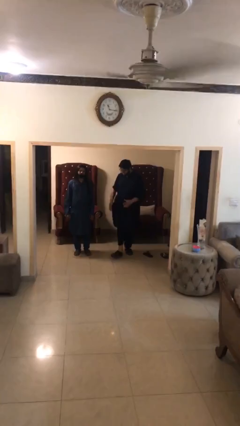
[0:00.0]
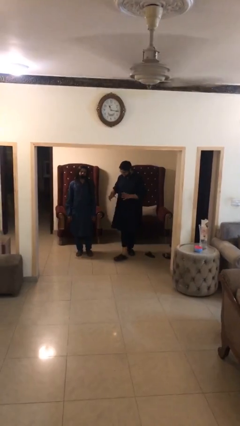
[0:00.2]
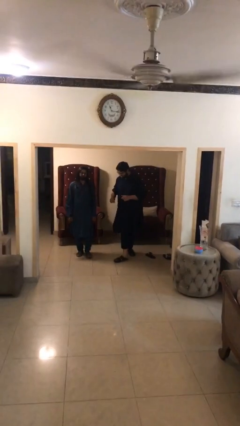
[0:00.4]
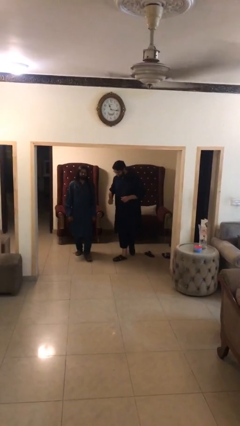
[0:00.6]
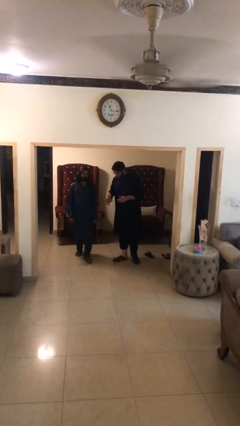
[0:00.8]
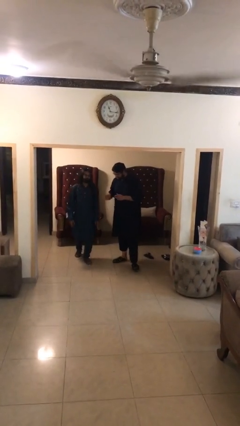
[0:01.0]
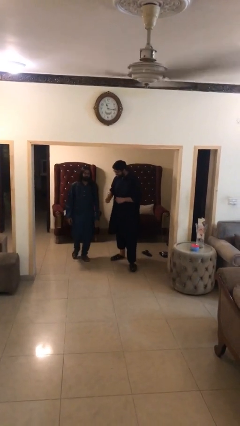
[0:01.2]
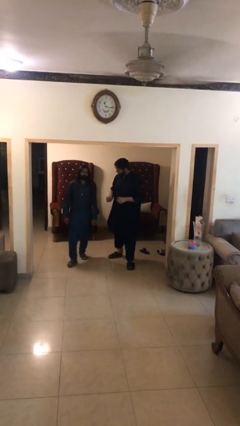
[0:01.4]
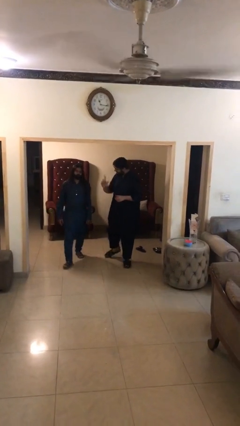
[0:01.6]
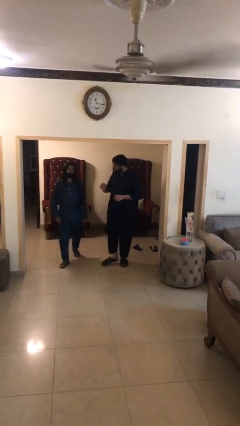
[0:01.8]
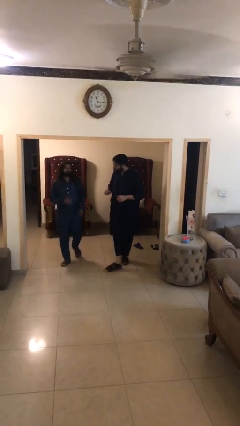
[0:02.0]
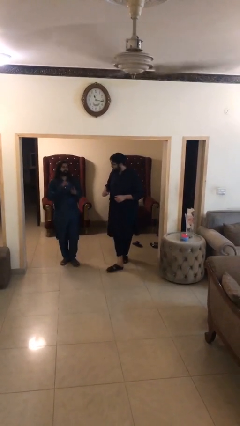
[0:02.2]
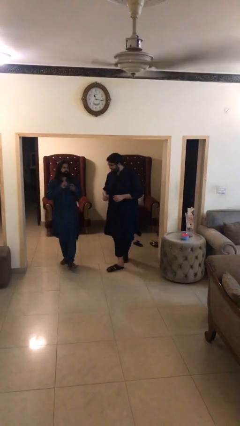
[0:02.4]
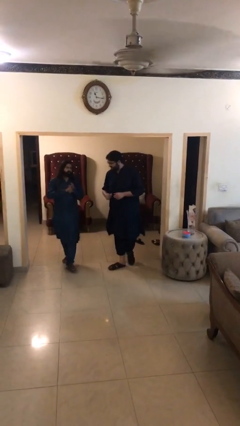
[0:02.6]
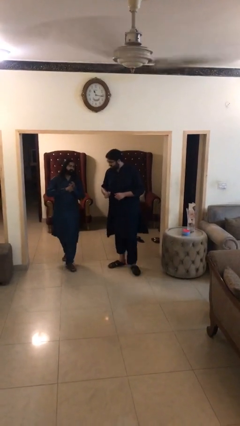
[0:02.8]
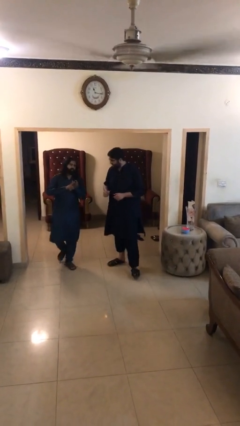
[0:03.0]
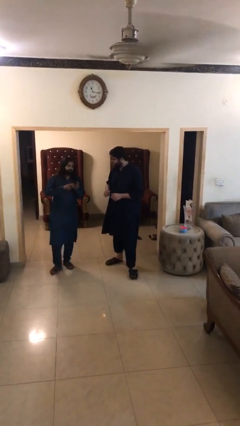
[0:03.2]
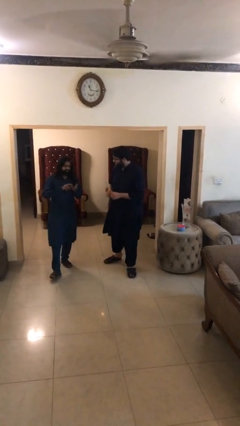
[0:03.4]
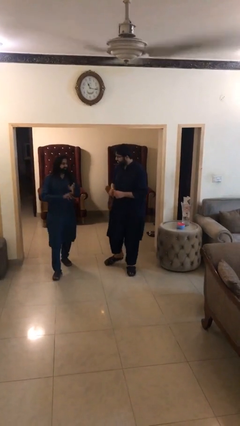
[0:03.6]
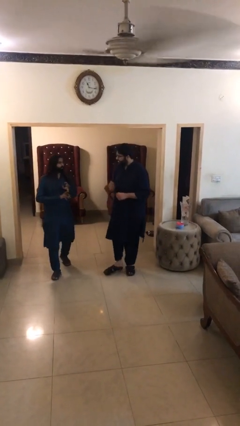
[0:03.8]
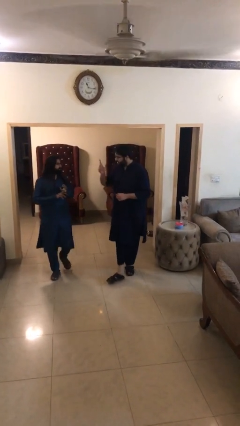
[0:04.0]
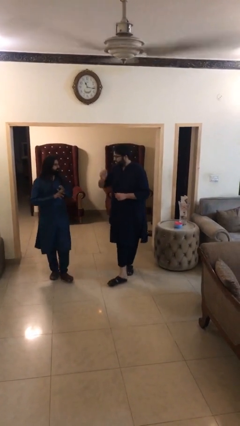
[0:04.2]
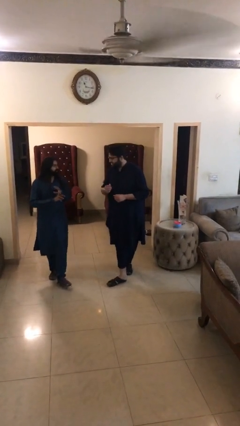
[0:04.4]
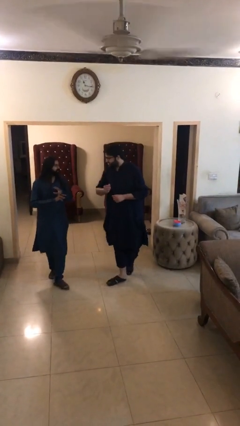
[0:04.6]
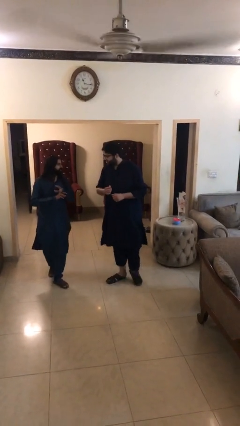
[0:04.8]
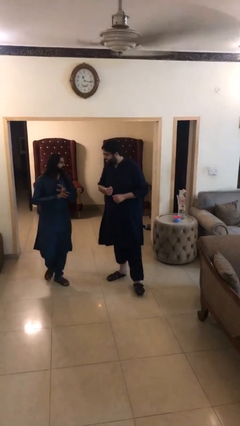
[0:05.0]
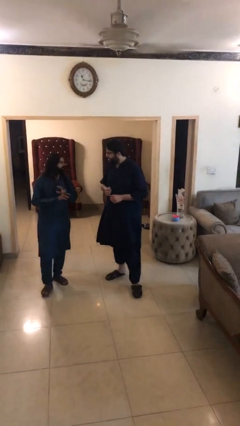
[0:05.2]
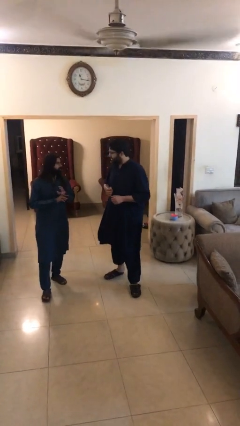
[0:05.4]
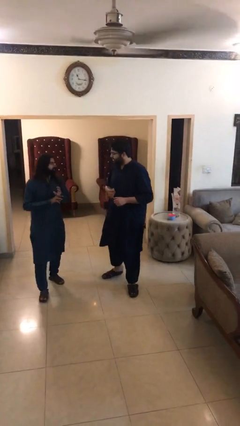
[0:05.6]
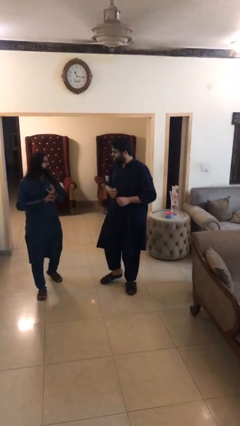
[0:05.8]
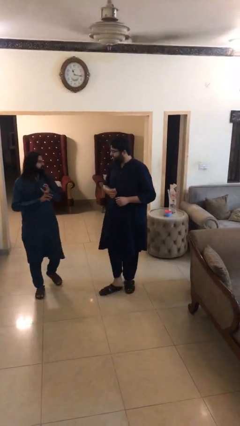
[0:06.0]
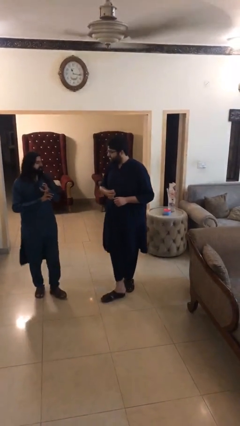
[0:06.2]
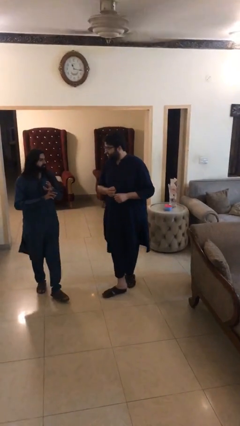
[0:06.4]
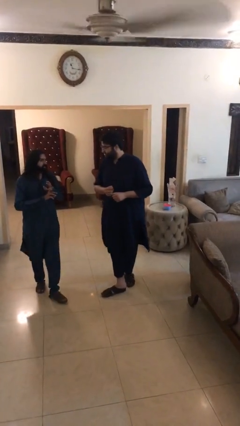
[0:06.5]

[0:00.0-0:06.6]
person talks to person

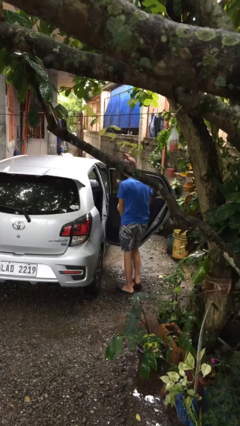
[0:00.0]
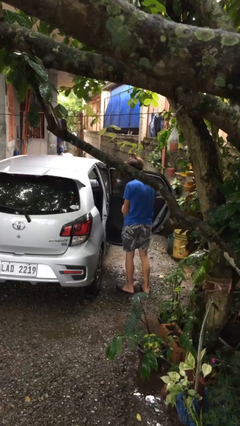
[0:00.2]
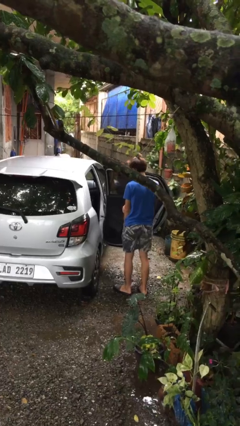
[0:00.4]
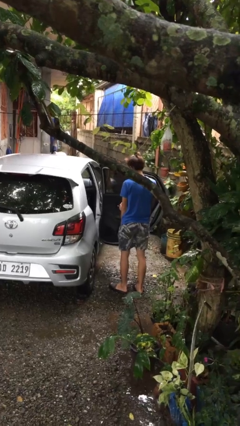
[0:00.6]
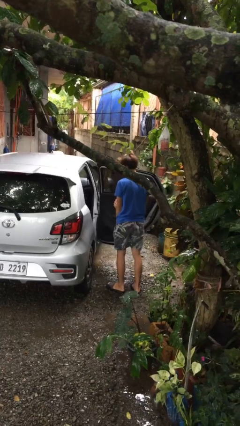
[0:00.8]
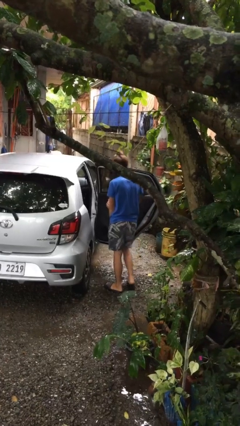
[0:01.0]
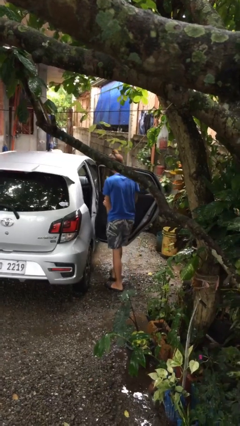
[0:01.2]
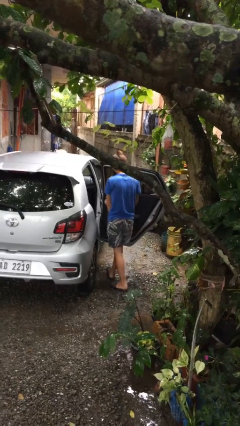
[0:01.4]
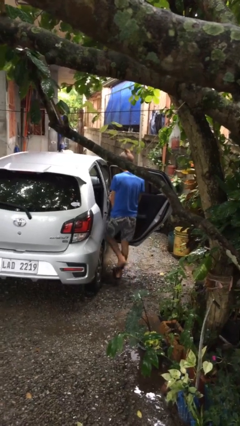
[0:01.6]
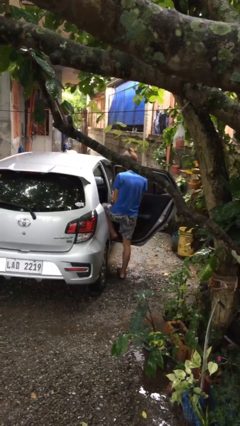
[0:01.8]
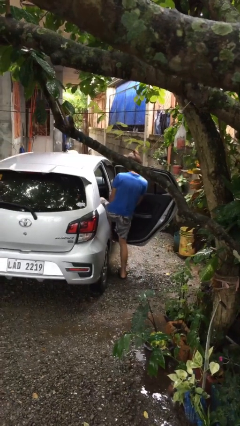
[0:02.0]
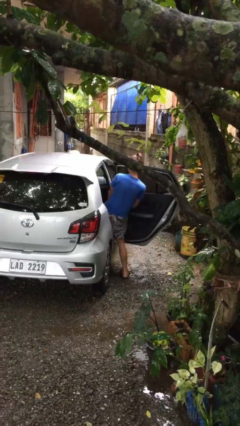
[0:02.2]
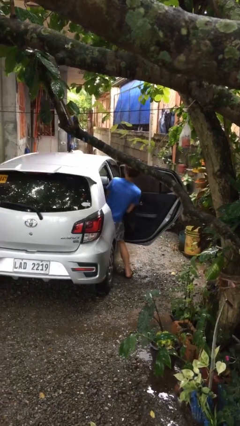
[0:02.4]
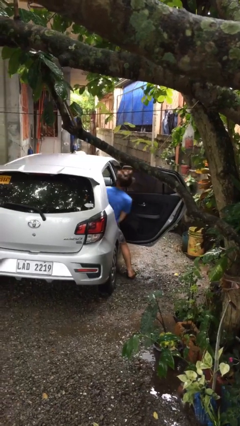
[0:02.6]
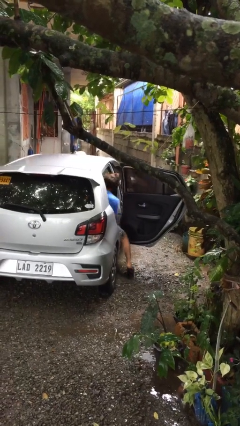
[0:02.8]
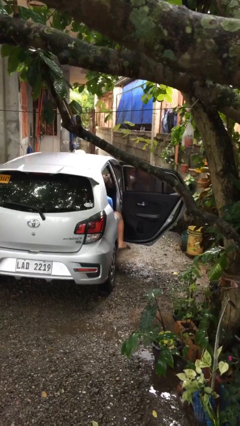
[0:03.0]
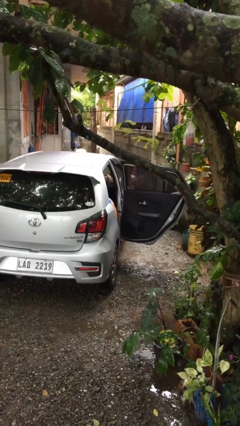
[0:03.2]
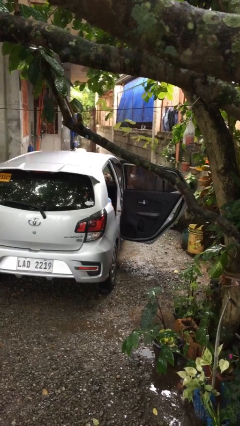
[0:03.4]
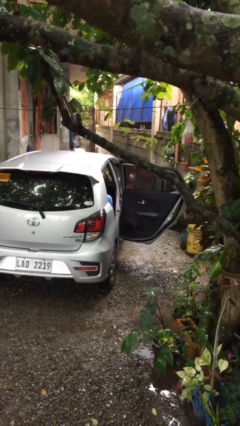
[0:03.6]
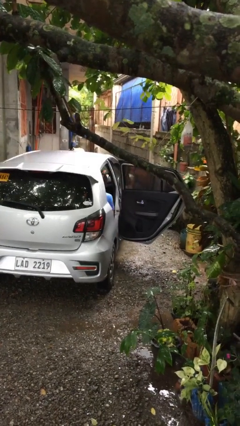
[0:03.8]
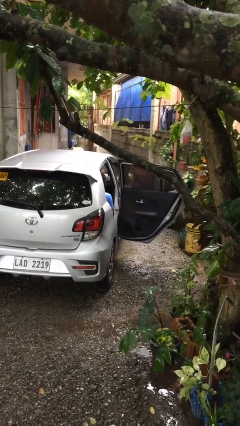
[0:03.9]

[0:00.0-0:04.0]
person enters car

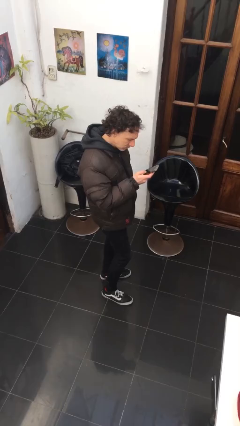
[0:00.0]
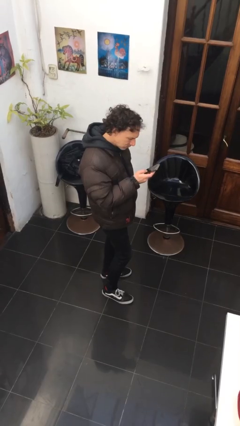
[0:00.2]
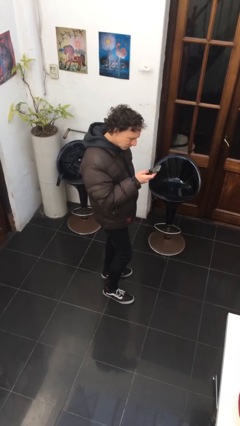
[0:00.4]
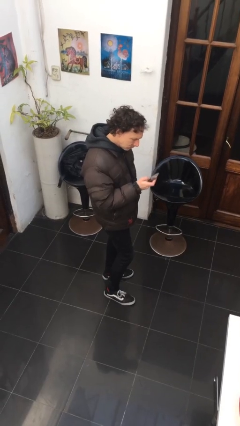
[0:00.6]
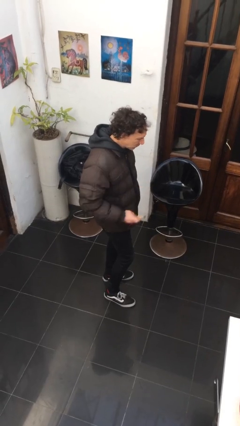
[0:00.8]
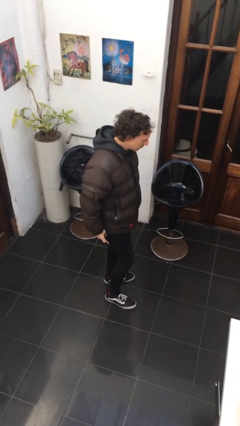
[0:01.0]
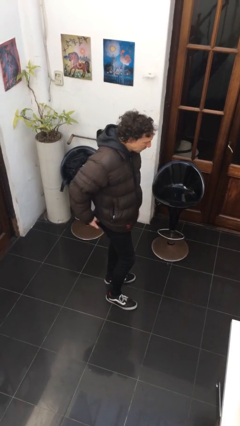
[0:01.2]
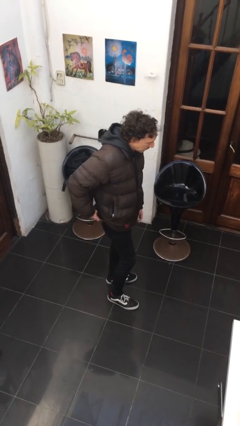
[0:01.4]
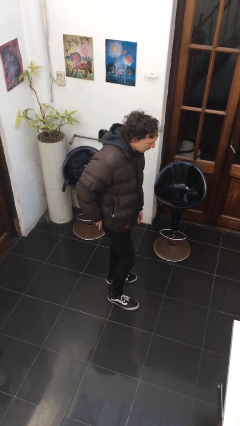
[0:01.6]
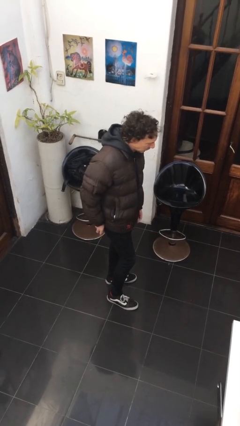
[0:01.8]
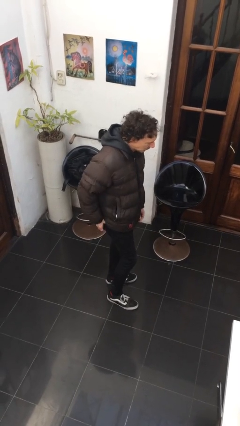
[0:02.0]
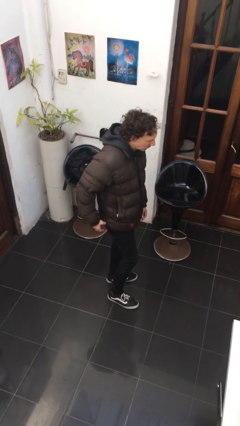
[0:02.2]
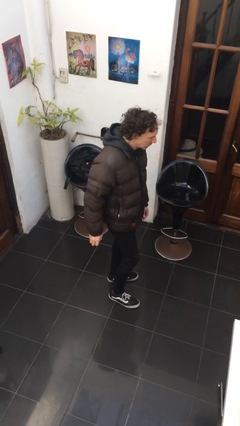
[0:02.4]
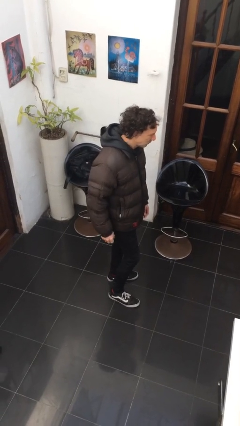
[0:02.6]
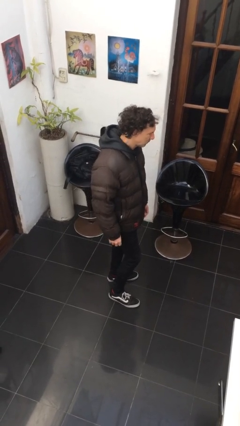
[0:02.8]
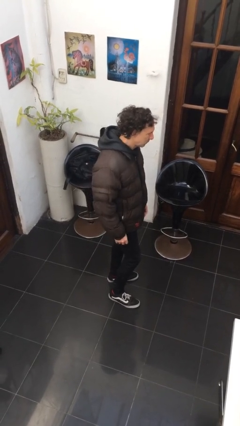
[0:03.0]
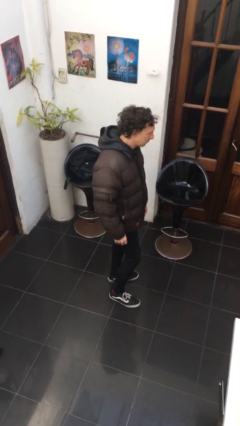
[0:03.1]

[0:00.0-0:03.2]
person puts phone into pocket

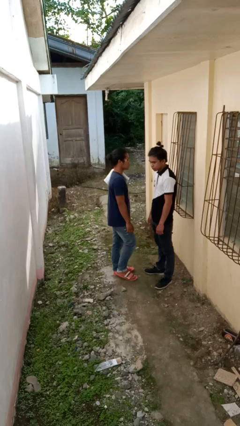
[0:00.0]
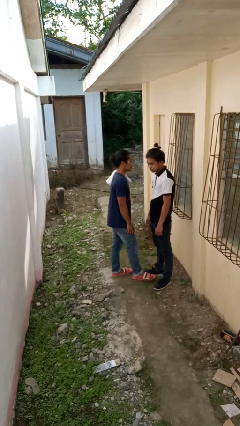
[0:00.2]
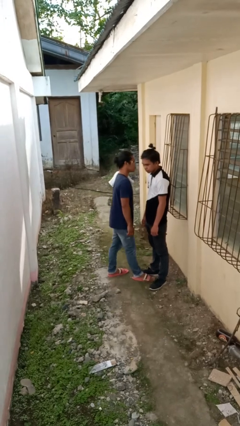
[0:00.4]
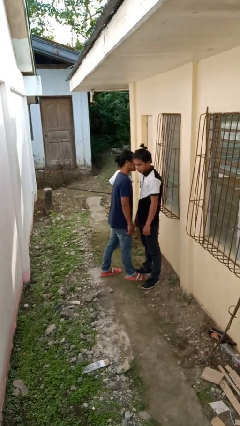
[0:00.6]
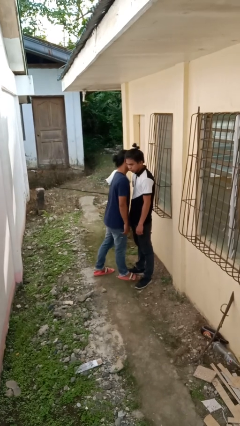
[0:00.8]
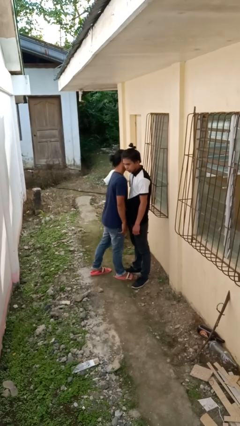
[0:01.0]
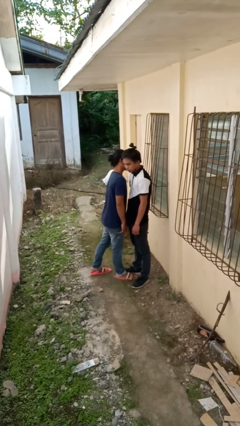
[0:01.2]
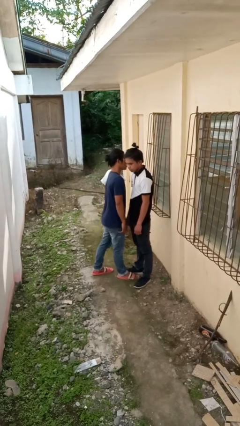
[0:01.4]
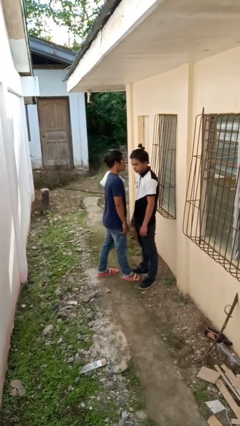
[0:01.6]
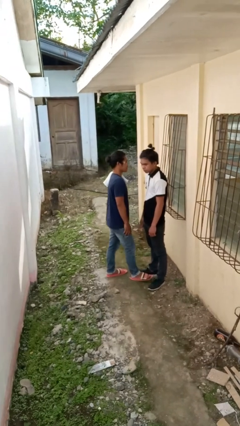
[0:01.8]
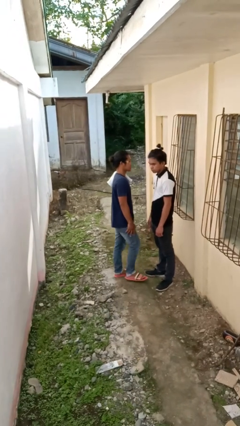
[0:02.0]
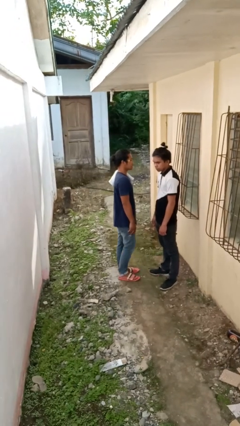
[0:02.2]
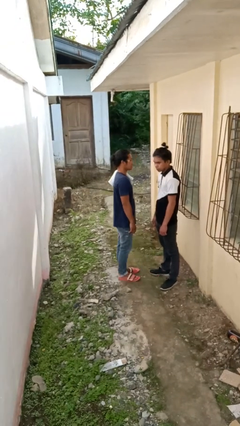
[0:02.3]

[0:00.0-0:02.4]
person kisses cheek of person

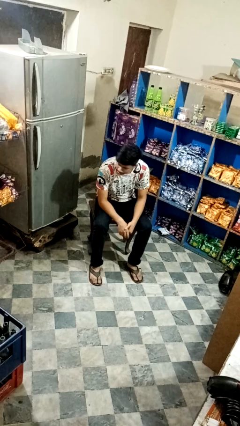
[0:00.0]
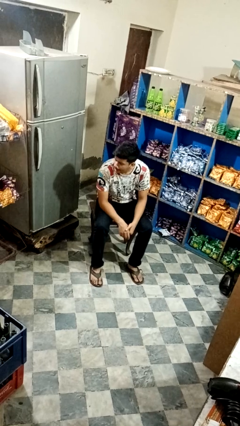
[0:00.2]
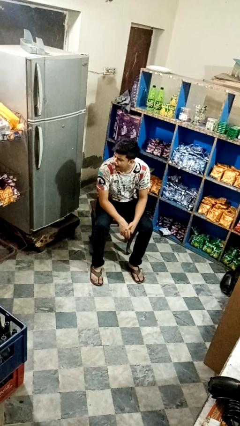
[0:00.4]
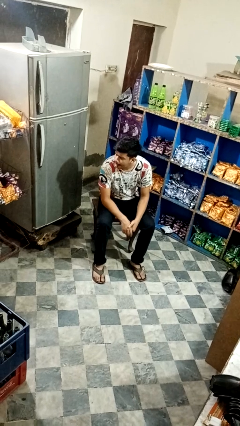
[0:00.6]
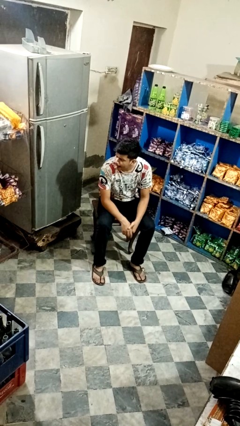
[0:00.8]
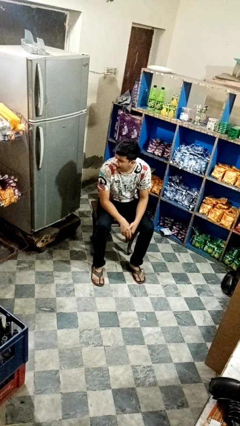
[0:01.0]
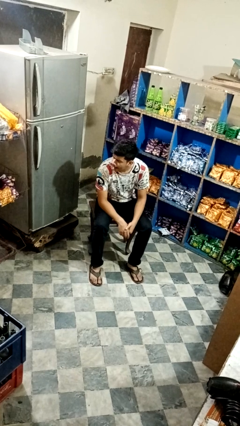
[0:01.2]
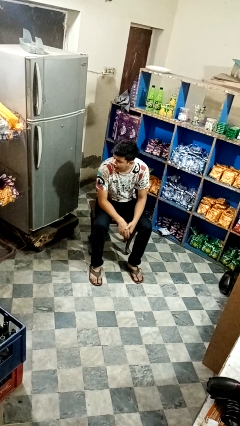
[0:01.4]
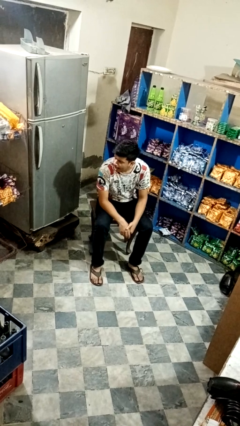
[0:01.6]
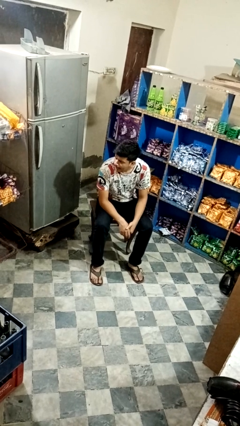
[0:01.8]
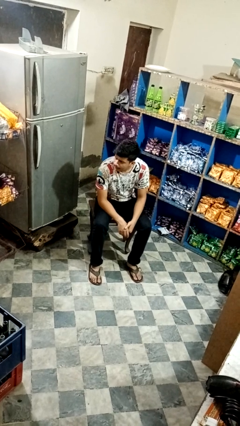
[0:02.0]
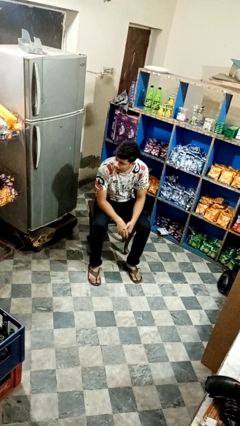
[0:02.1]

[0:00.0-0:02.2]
person sticks out tongue
